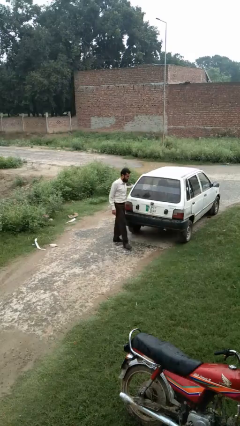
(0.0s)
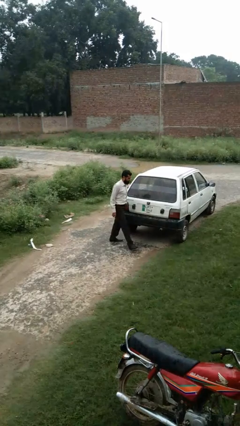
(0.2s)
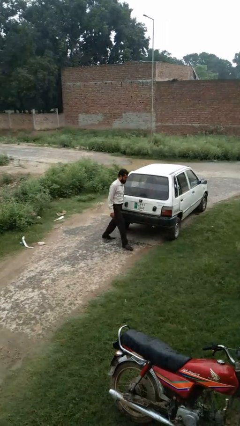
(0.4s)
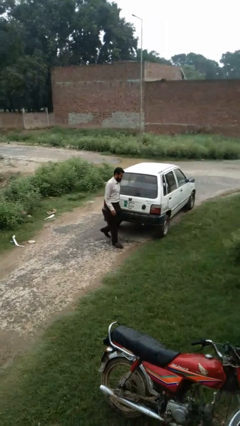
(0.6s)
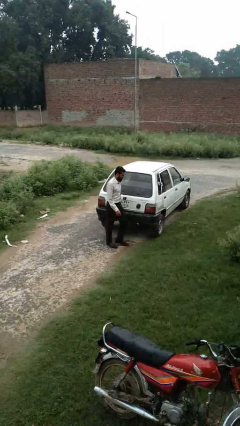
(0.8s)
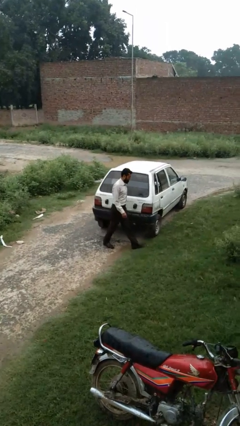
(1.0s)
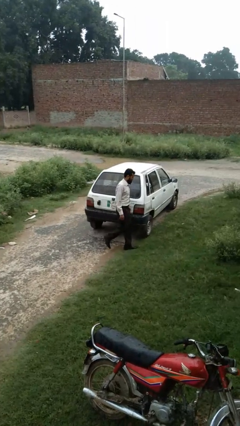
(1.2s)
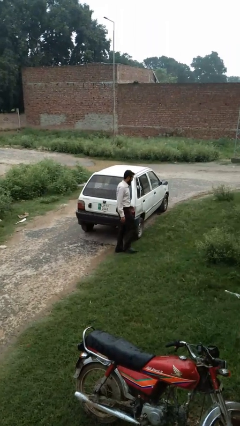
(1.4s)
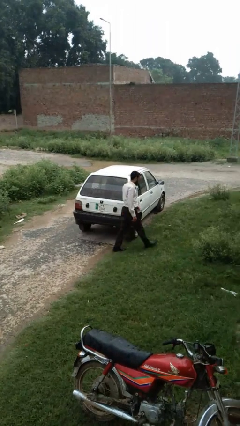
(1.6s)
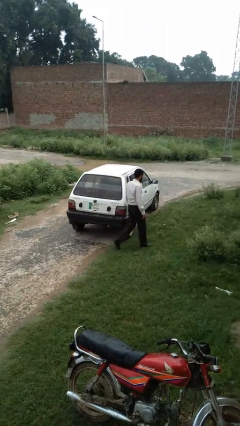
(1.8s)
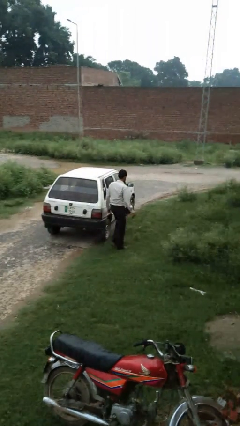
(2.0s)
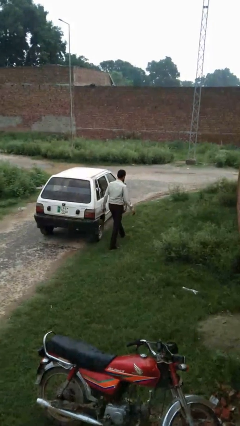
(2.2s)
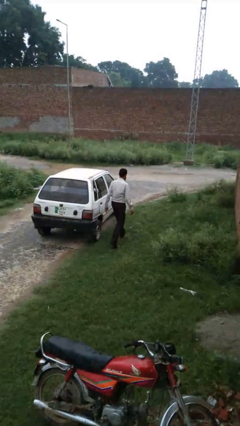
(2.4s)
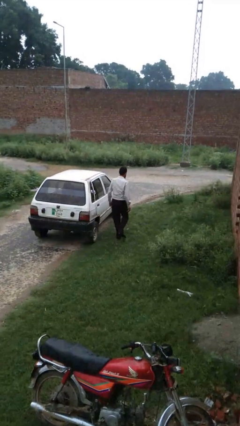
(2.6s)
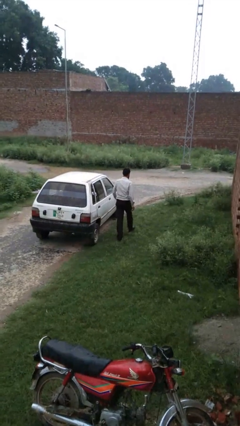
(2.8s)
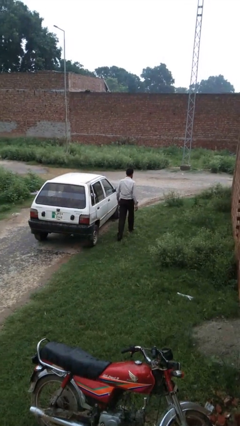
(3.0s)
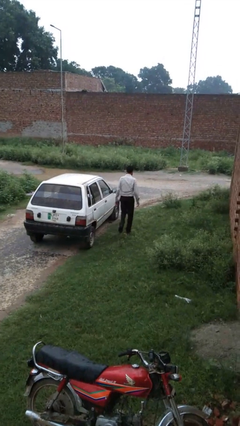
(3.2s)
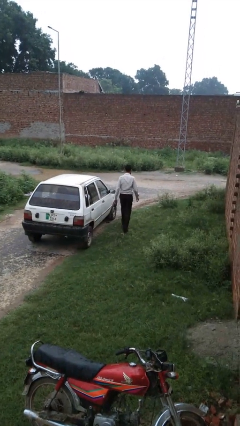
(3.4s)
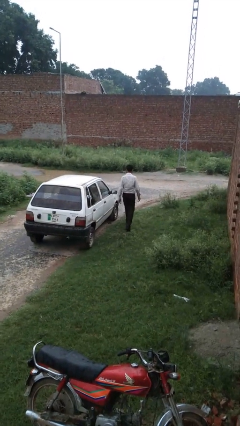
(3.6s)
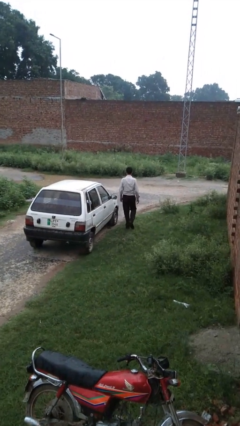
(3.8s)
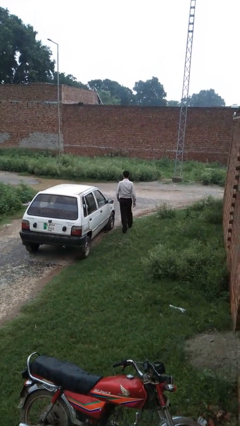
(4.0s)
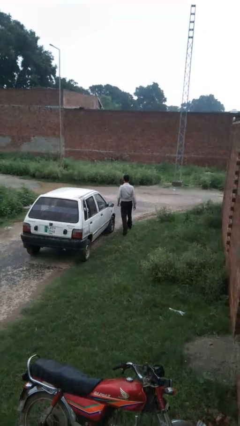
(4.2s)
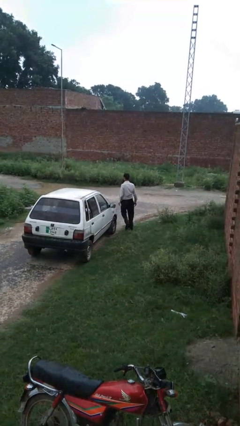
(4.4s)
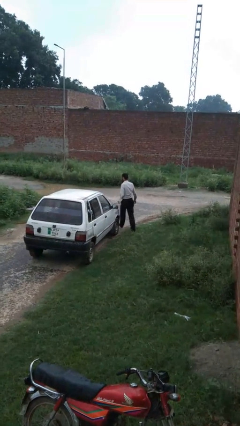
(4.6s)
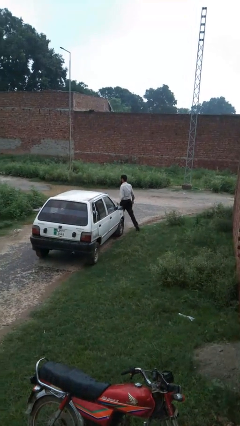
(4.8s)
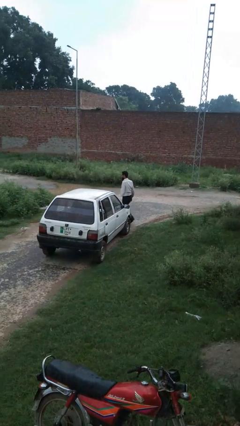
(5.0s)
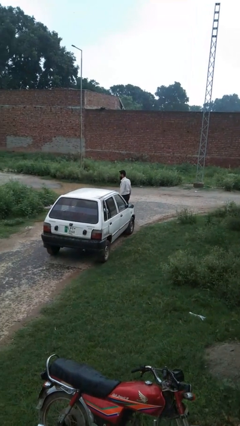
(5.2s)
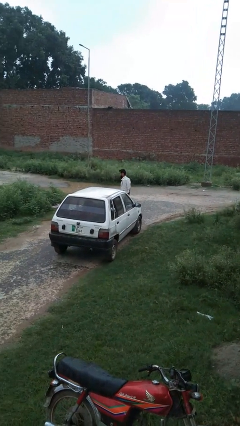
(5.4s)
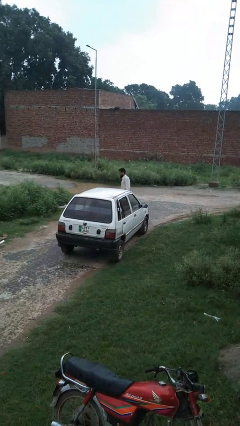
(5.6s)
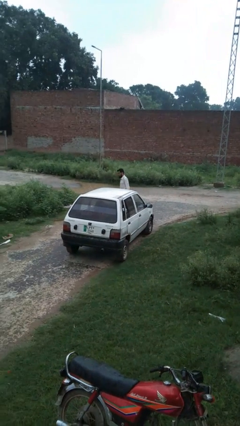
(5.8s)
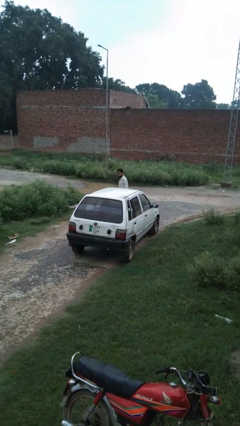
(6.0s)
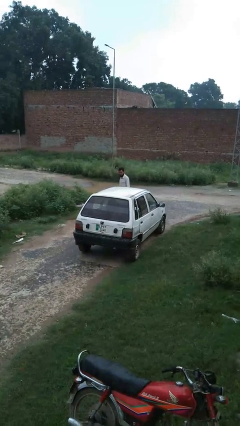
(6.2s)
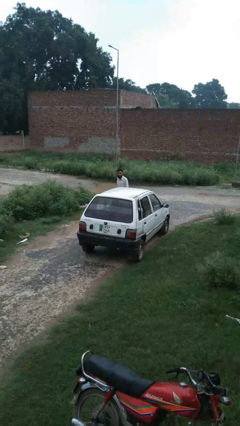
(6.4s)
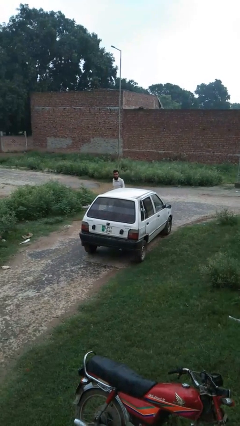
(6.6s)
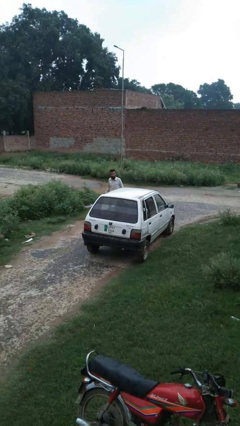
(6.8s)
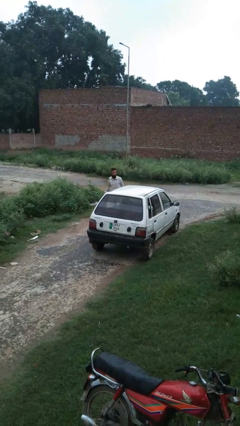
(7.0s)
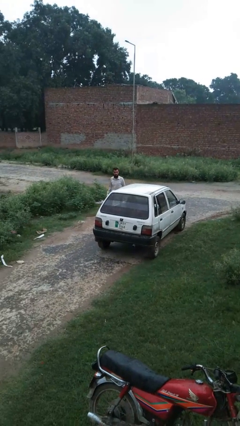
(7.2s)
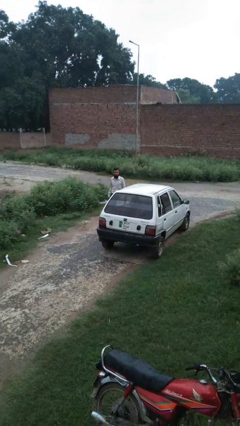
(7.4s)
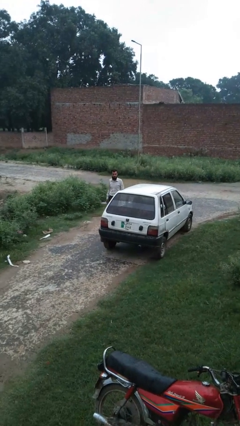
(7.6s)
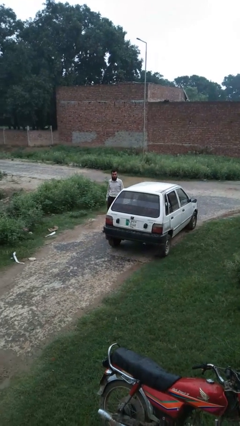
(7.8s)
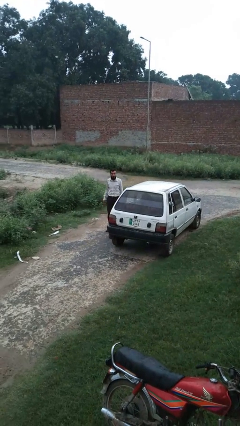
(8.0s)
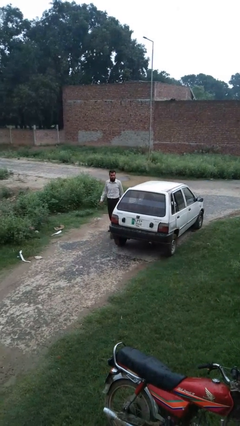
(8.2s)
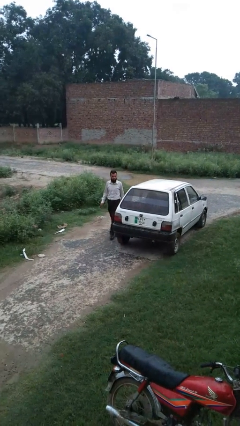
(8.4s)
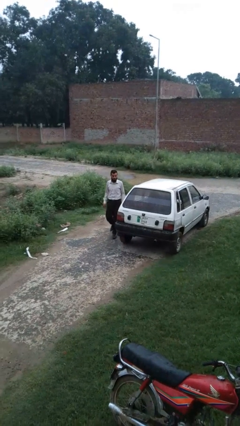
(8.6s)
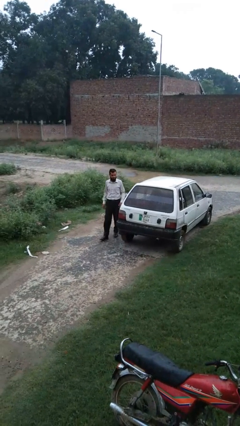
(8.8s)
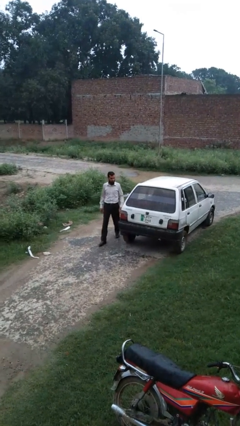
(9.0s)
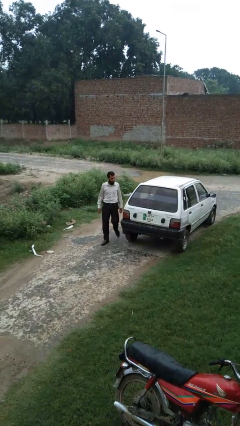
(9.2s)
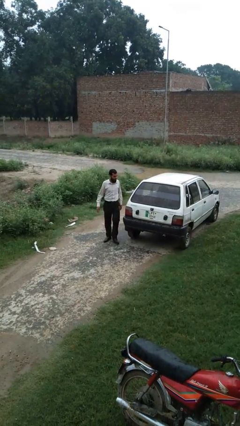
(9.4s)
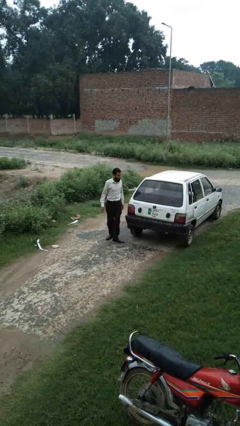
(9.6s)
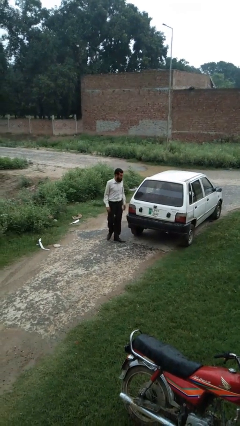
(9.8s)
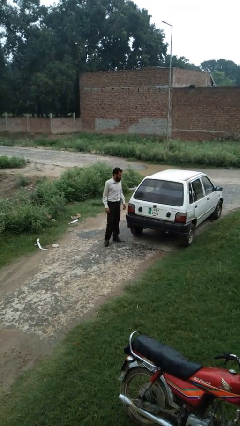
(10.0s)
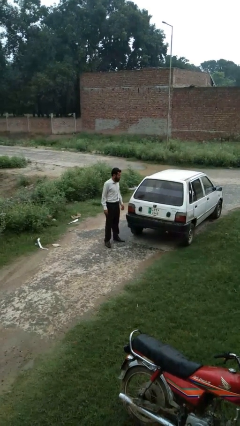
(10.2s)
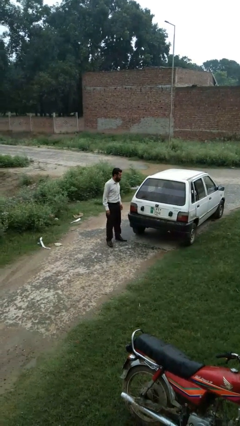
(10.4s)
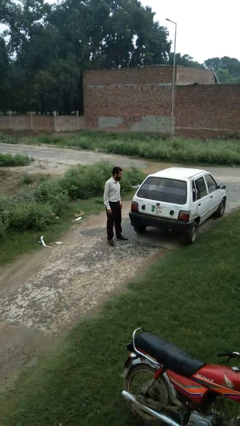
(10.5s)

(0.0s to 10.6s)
person walks around car

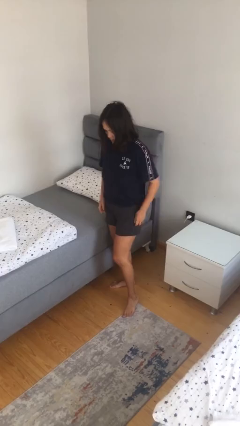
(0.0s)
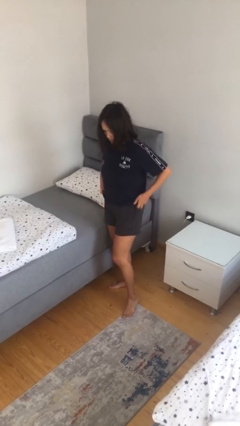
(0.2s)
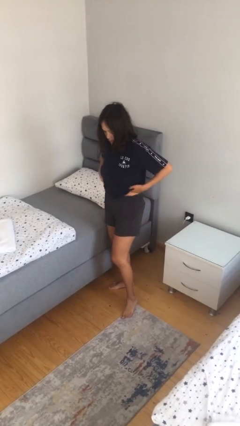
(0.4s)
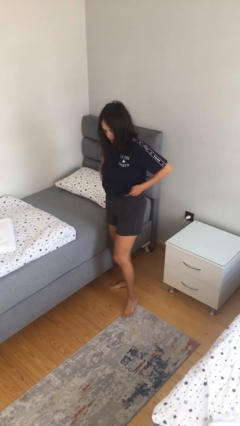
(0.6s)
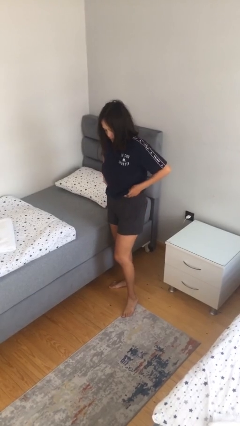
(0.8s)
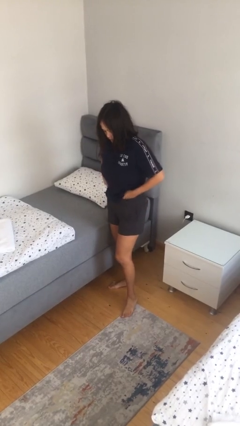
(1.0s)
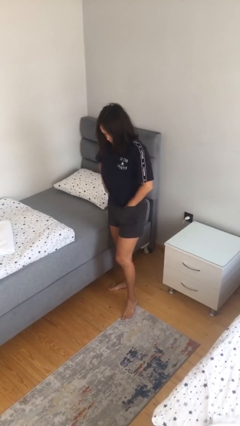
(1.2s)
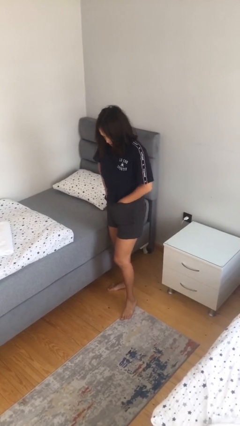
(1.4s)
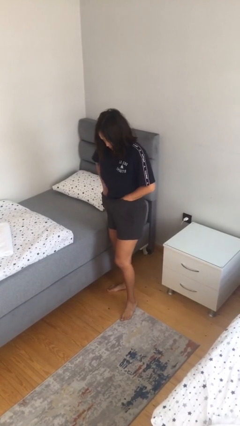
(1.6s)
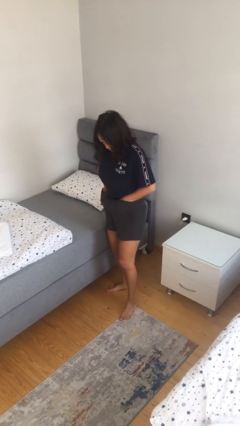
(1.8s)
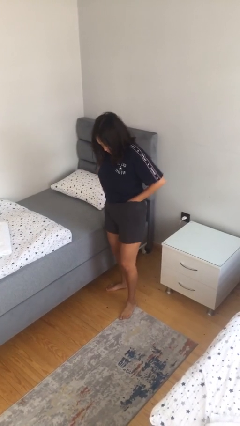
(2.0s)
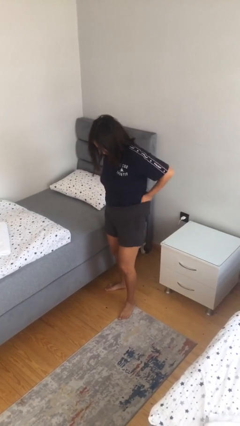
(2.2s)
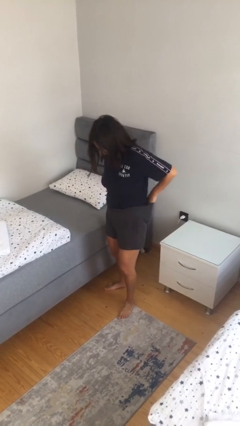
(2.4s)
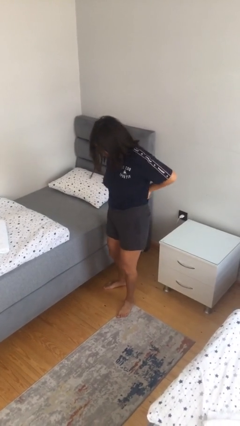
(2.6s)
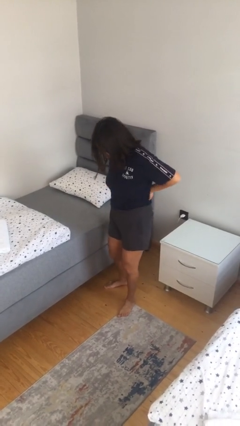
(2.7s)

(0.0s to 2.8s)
person tucks in shirt

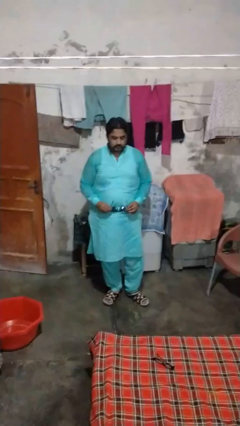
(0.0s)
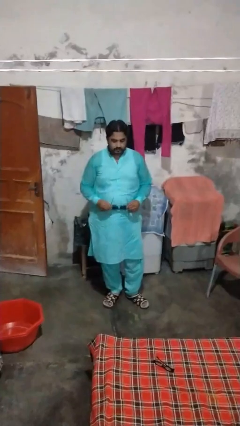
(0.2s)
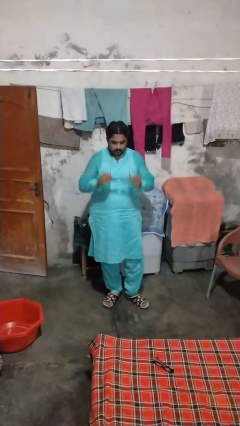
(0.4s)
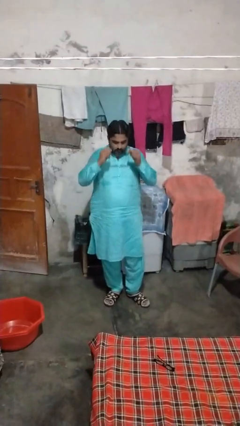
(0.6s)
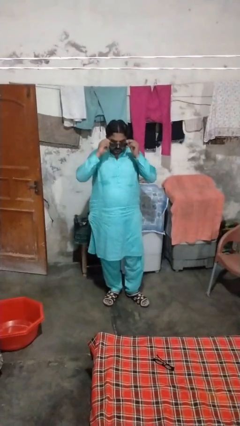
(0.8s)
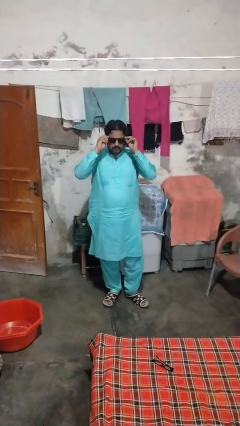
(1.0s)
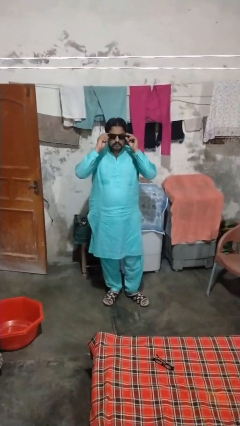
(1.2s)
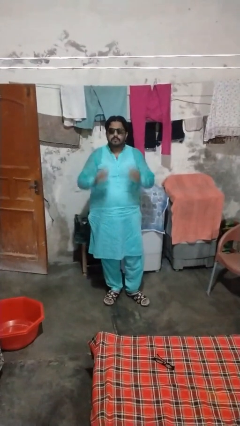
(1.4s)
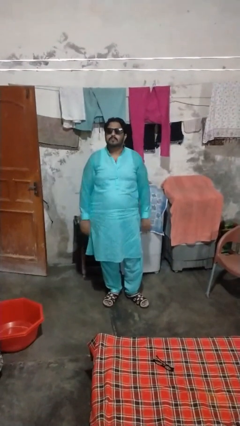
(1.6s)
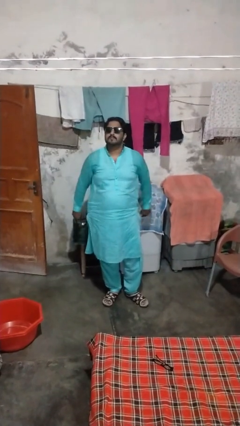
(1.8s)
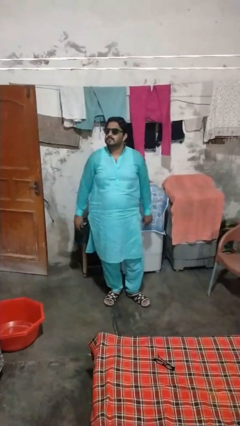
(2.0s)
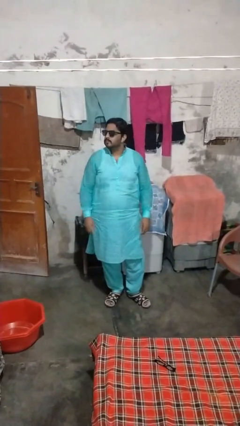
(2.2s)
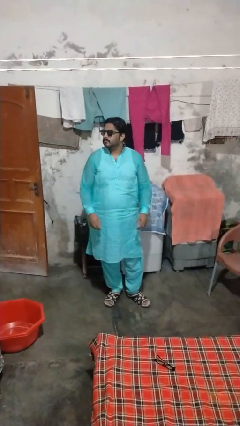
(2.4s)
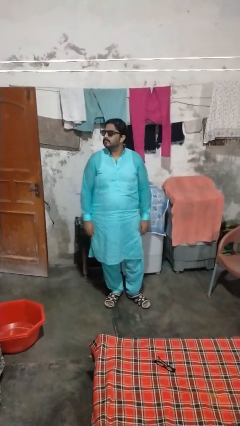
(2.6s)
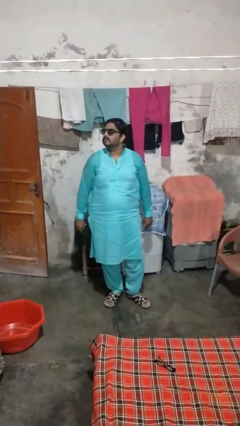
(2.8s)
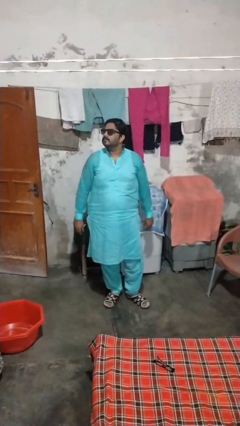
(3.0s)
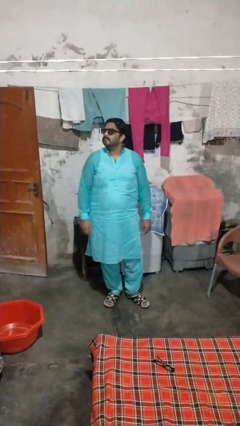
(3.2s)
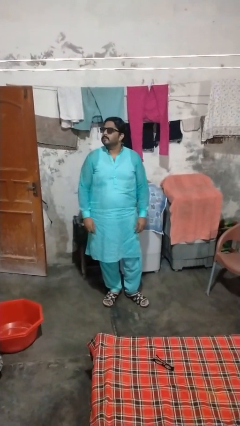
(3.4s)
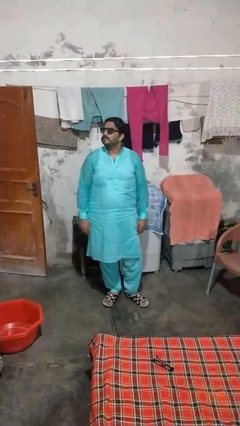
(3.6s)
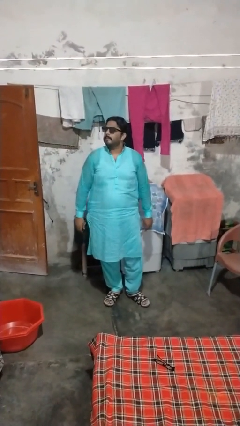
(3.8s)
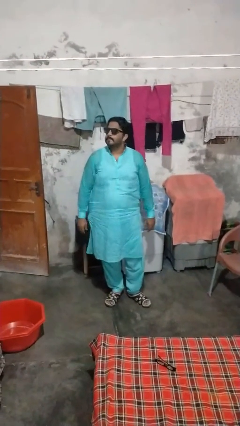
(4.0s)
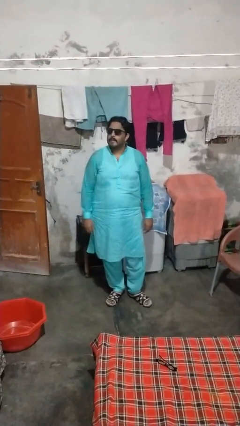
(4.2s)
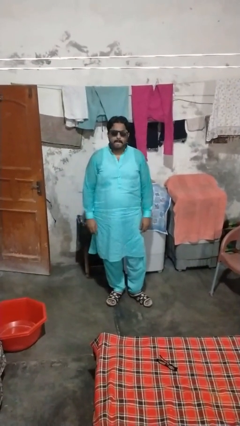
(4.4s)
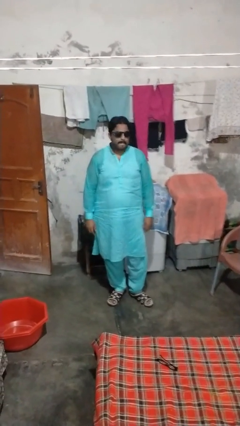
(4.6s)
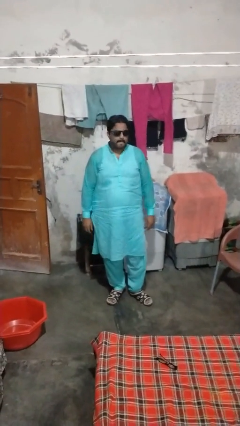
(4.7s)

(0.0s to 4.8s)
person puts on sunglasses
